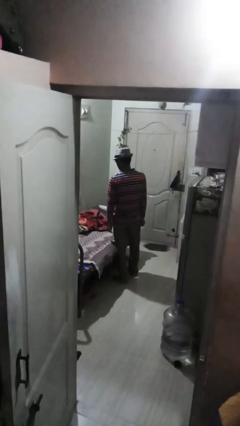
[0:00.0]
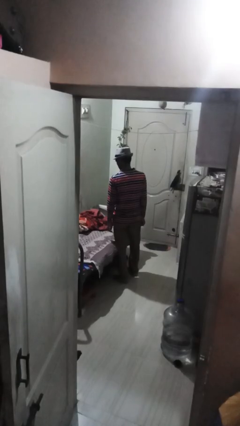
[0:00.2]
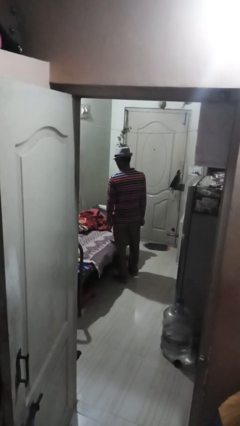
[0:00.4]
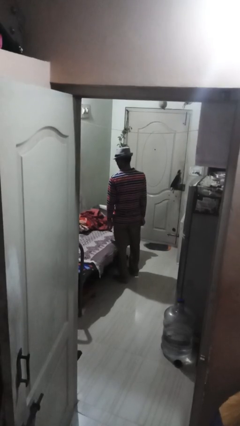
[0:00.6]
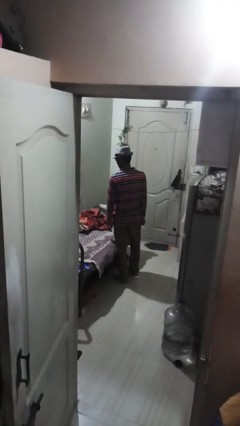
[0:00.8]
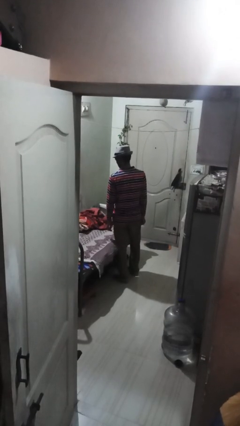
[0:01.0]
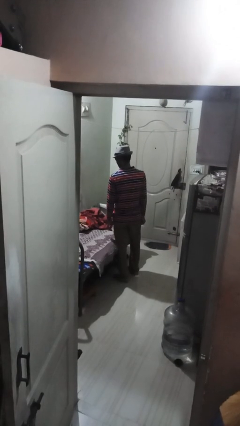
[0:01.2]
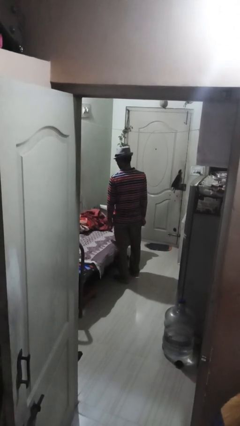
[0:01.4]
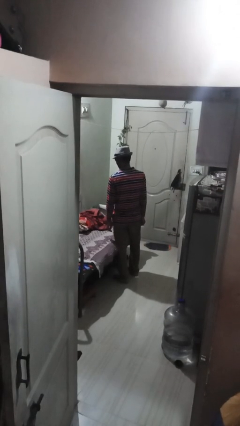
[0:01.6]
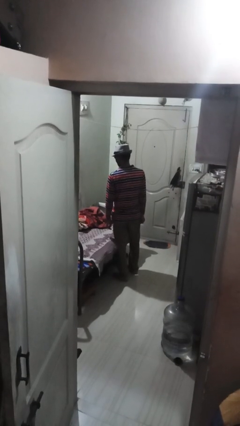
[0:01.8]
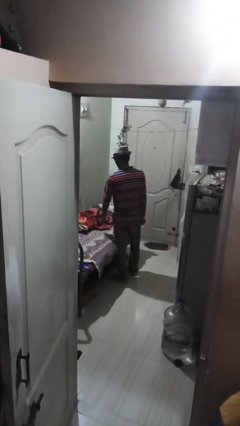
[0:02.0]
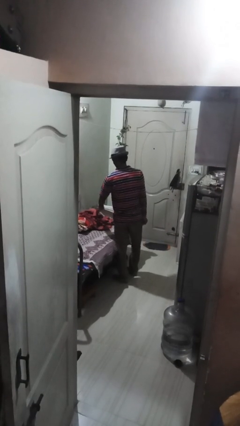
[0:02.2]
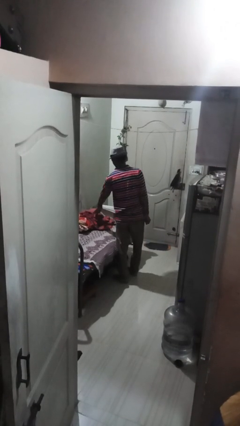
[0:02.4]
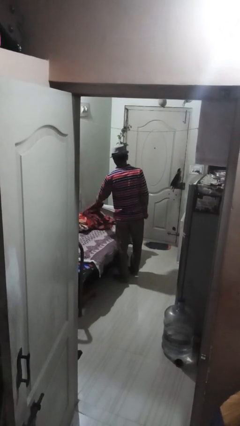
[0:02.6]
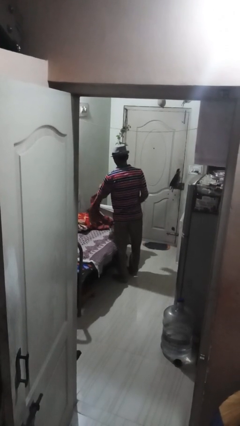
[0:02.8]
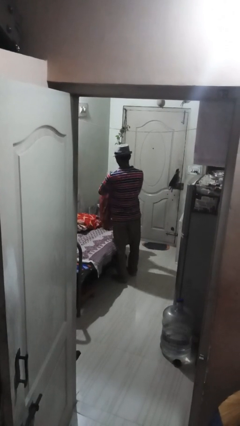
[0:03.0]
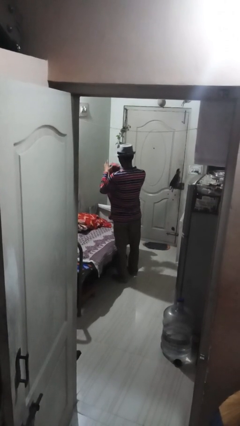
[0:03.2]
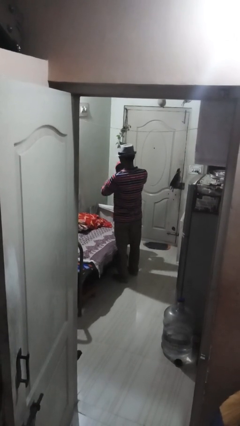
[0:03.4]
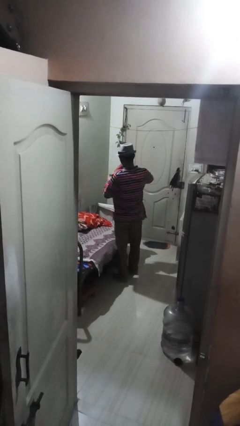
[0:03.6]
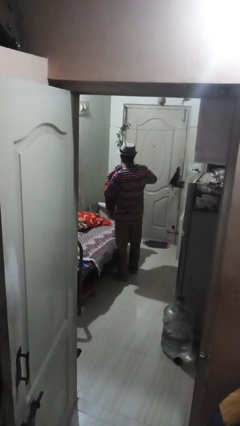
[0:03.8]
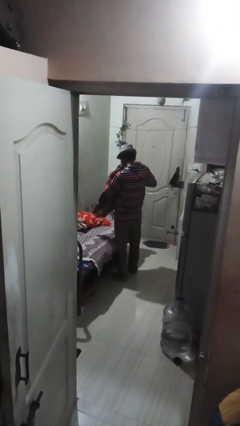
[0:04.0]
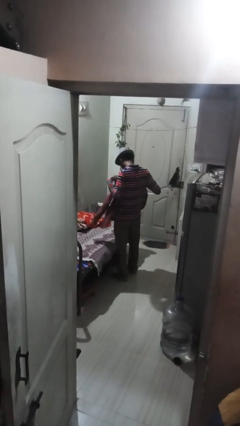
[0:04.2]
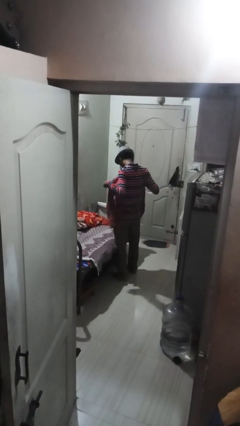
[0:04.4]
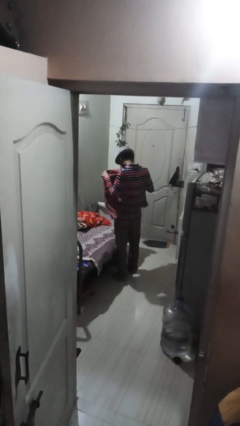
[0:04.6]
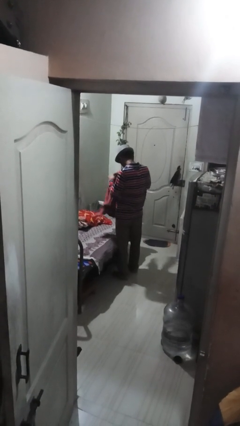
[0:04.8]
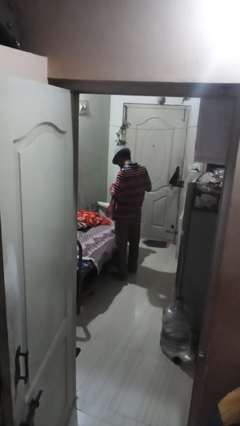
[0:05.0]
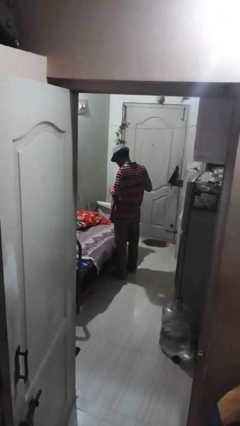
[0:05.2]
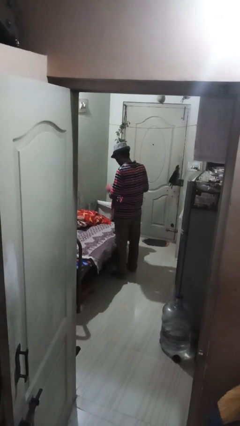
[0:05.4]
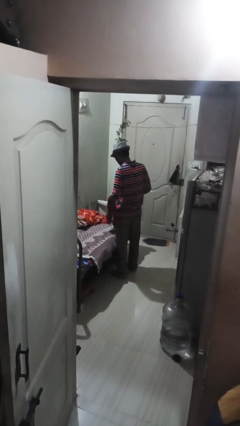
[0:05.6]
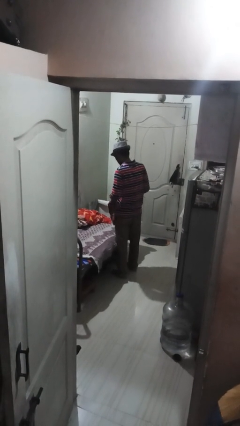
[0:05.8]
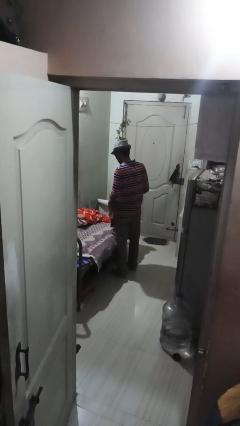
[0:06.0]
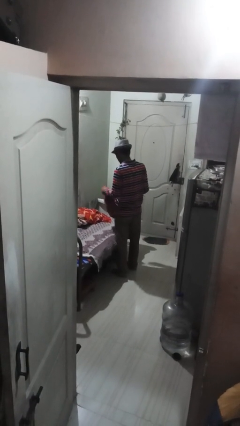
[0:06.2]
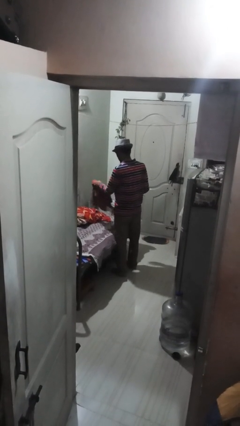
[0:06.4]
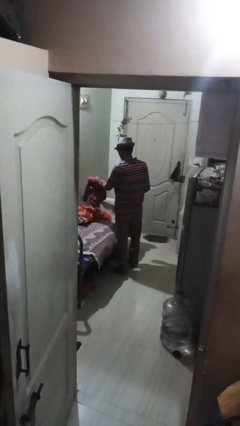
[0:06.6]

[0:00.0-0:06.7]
person folds shirt

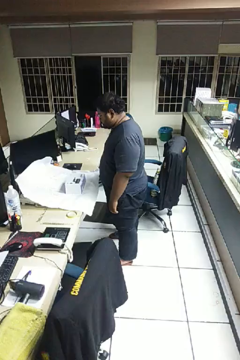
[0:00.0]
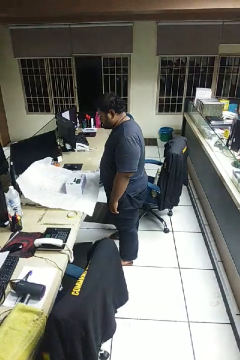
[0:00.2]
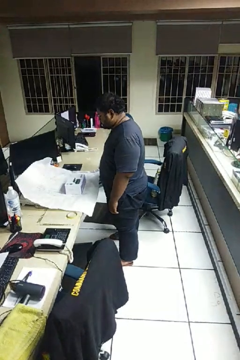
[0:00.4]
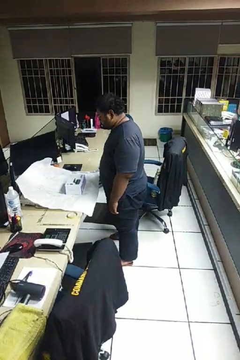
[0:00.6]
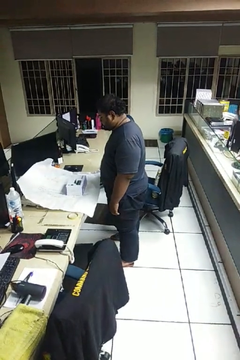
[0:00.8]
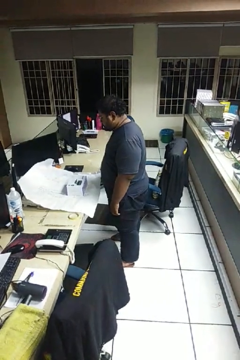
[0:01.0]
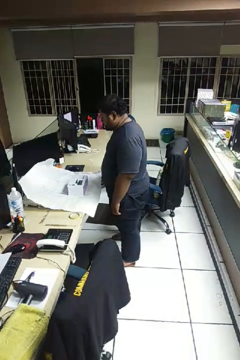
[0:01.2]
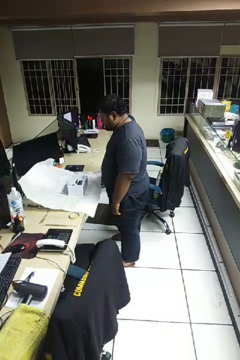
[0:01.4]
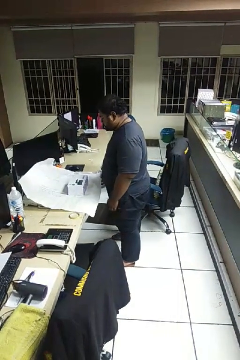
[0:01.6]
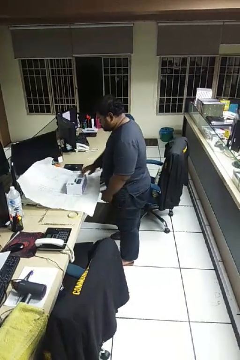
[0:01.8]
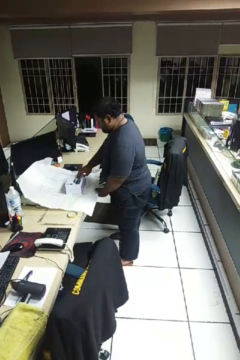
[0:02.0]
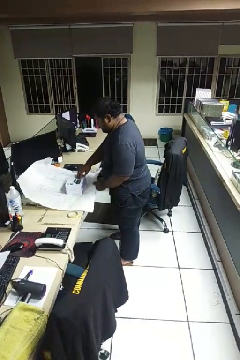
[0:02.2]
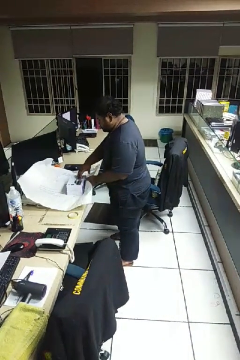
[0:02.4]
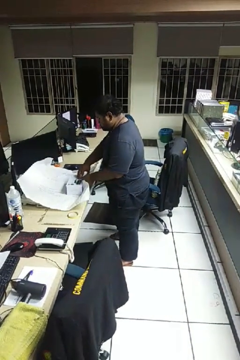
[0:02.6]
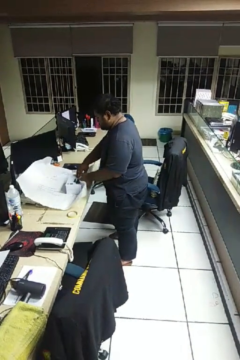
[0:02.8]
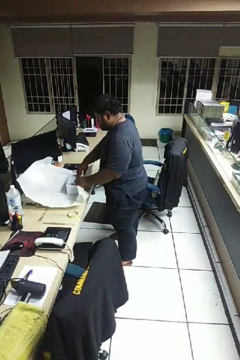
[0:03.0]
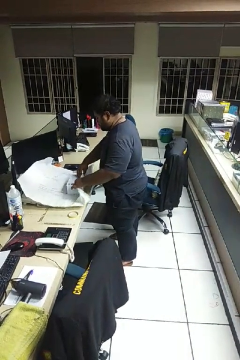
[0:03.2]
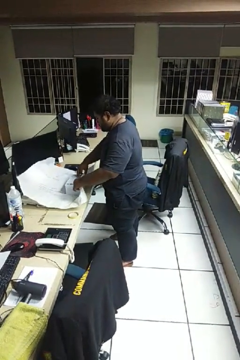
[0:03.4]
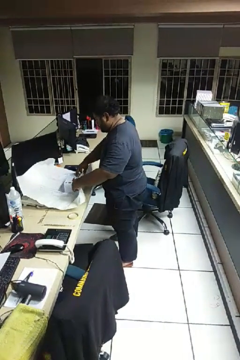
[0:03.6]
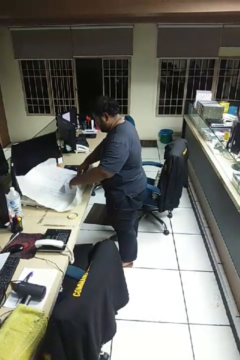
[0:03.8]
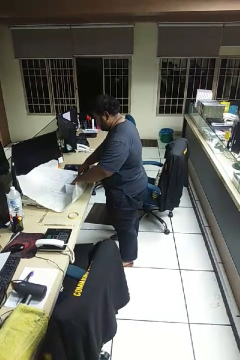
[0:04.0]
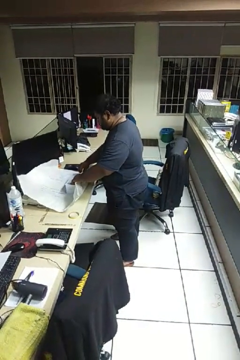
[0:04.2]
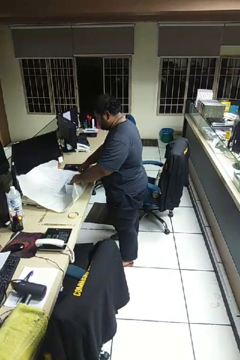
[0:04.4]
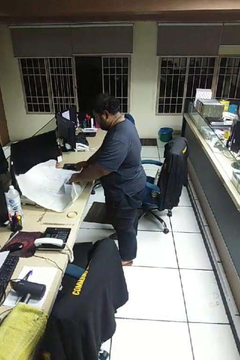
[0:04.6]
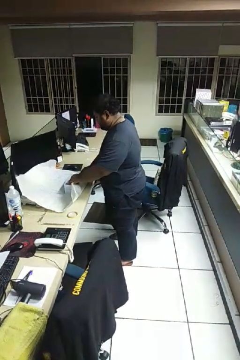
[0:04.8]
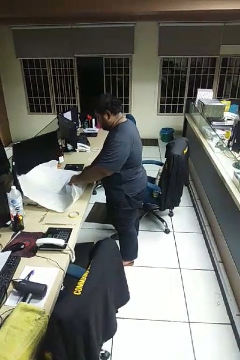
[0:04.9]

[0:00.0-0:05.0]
person wraps box

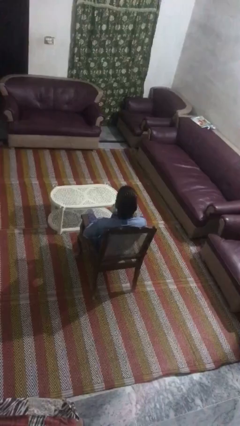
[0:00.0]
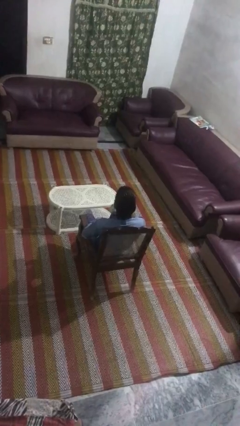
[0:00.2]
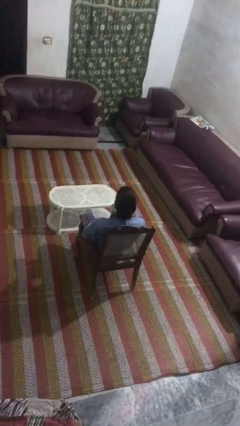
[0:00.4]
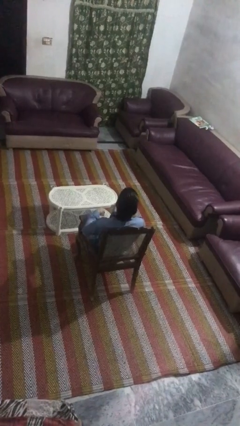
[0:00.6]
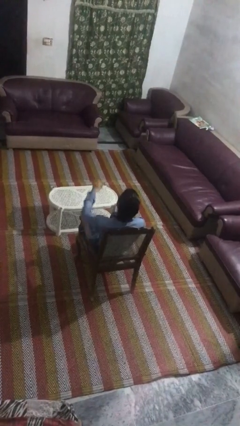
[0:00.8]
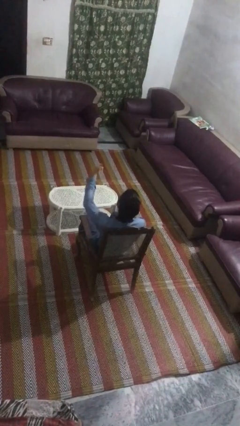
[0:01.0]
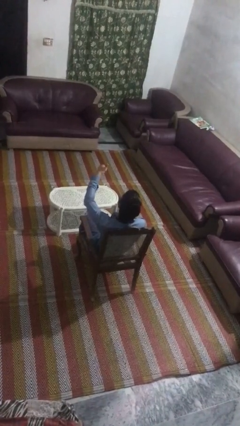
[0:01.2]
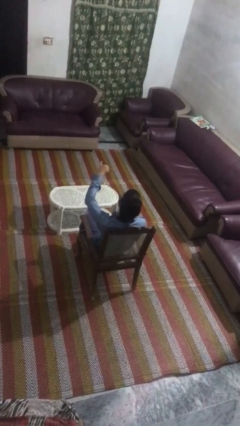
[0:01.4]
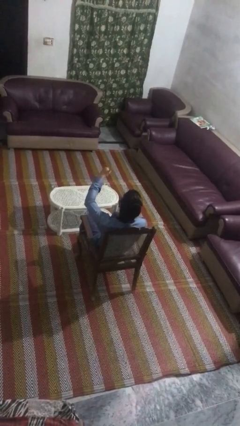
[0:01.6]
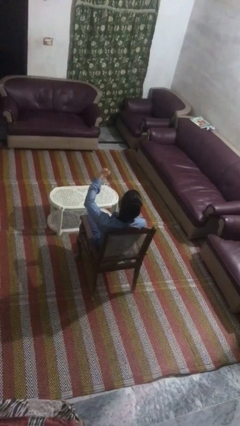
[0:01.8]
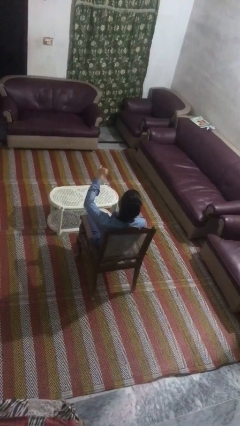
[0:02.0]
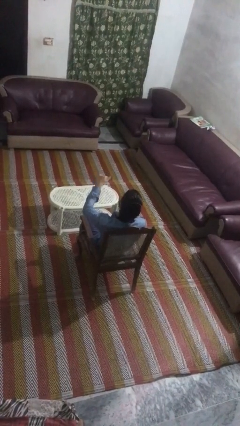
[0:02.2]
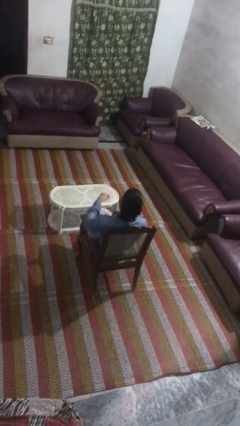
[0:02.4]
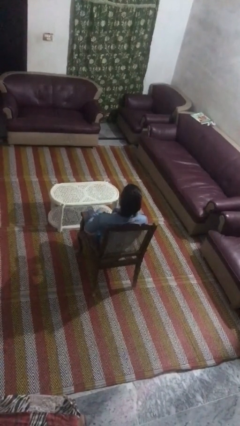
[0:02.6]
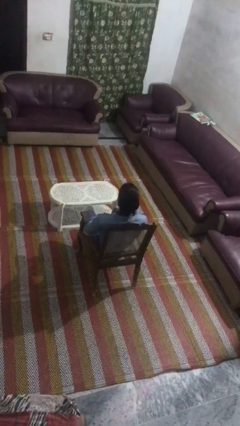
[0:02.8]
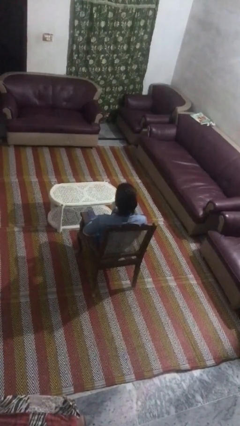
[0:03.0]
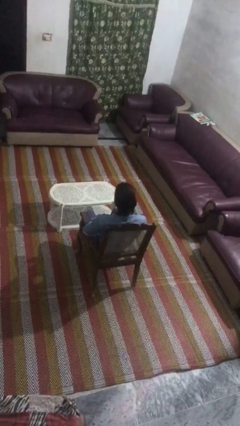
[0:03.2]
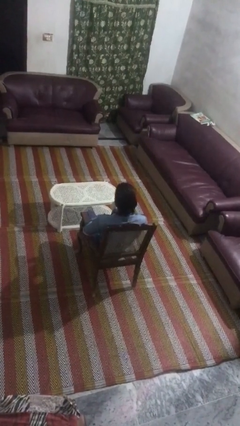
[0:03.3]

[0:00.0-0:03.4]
person gestures hang loose

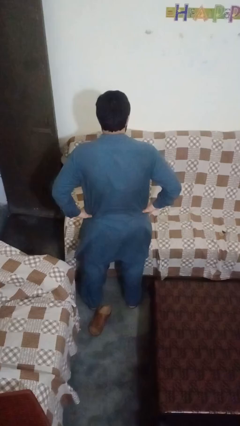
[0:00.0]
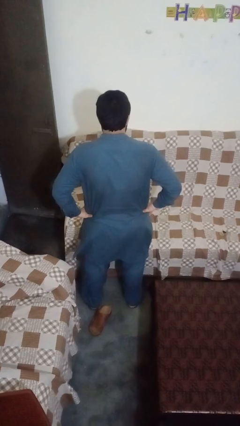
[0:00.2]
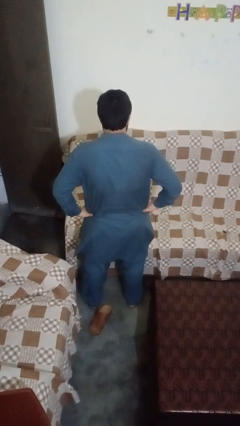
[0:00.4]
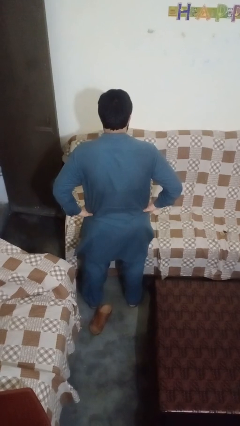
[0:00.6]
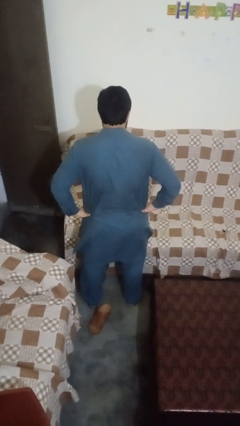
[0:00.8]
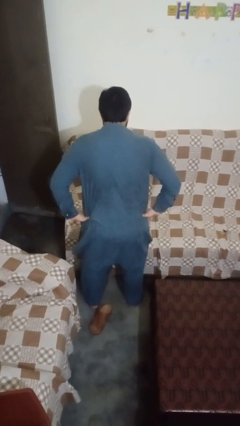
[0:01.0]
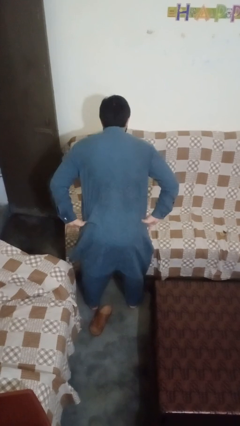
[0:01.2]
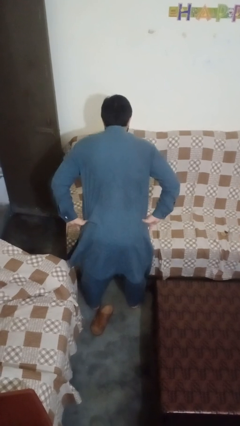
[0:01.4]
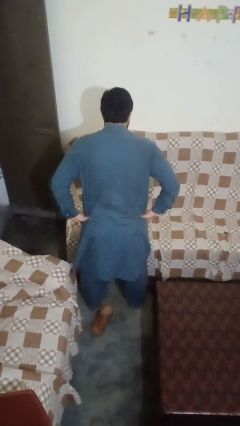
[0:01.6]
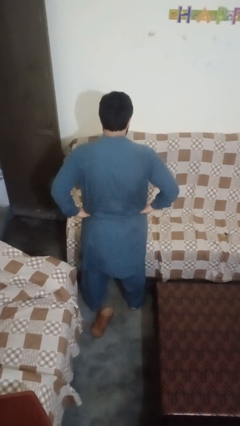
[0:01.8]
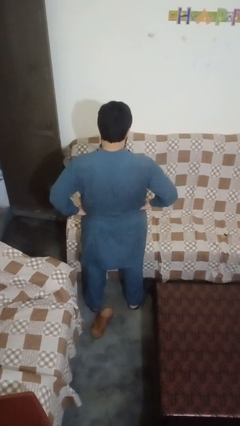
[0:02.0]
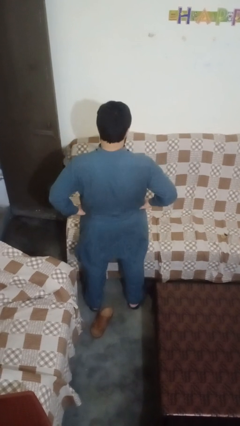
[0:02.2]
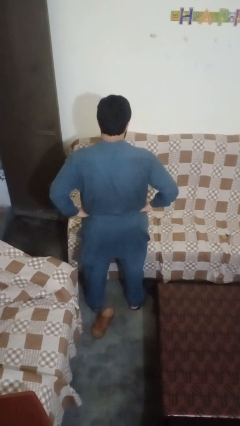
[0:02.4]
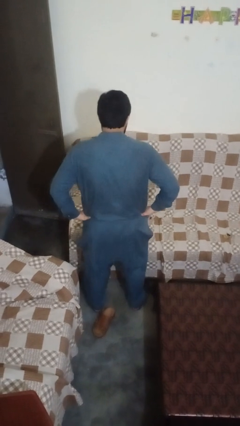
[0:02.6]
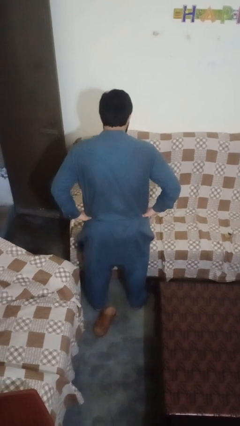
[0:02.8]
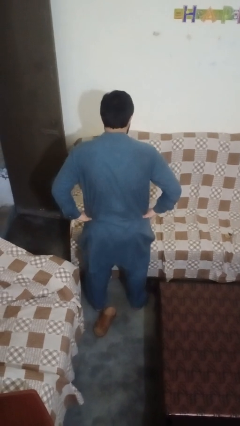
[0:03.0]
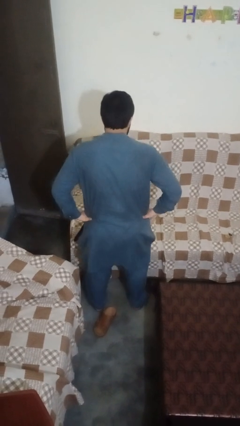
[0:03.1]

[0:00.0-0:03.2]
person wiggles hips

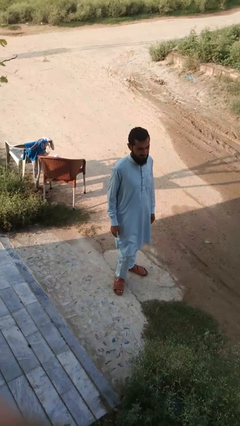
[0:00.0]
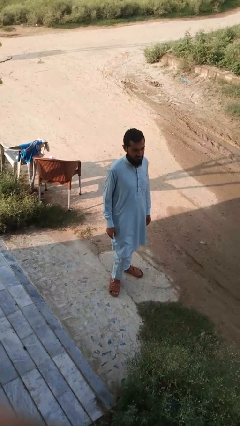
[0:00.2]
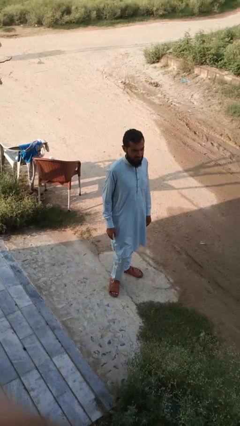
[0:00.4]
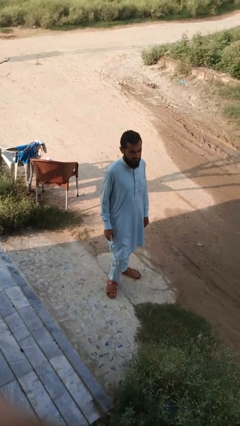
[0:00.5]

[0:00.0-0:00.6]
person wipes mouth with napkin
